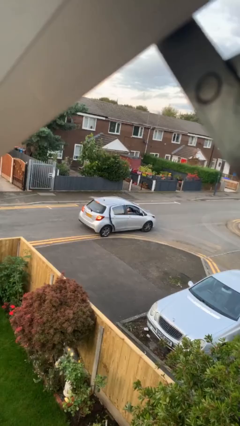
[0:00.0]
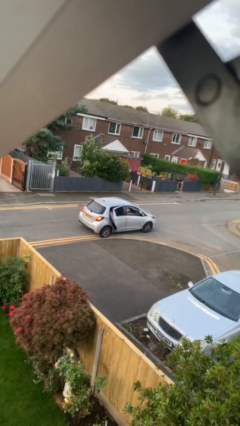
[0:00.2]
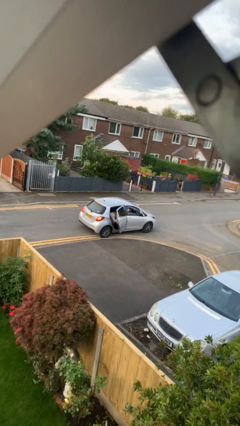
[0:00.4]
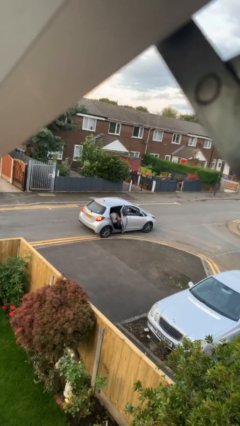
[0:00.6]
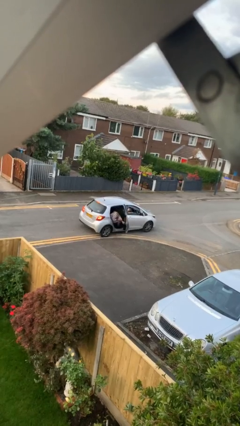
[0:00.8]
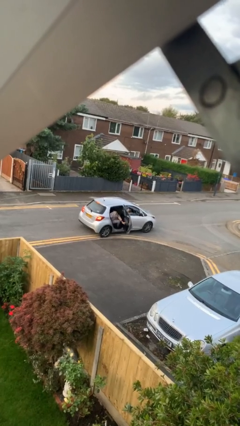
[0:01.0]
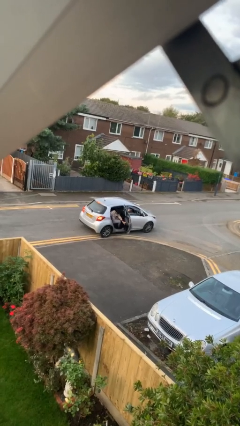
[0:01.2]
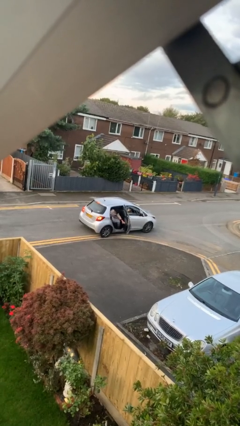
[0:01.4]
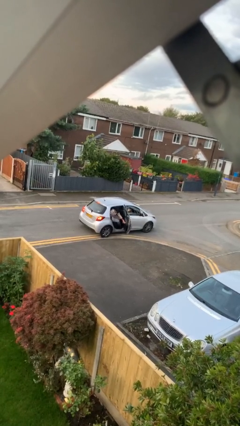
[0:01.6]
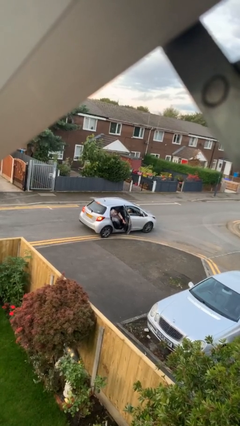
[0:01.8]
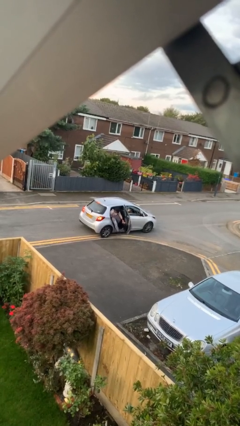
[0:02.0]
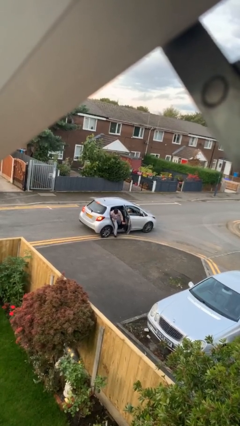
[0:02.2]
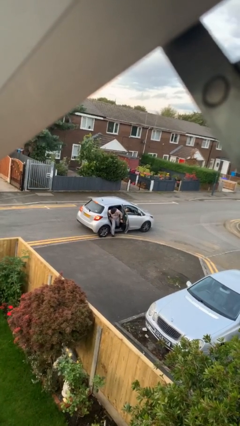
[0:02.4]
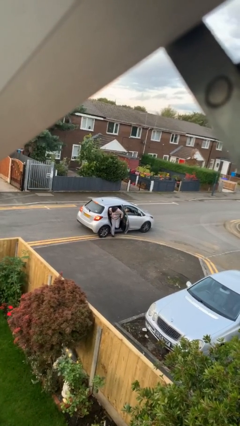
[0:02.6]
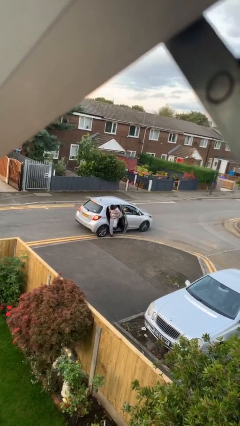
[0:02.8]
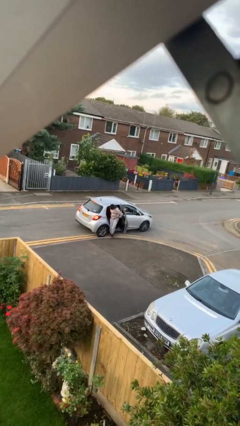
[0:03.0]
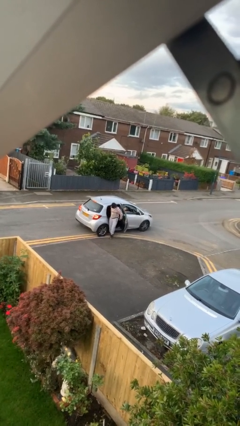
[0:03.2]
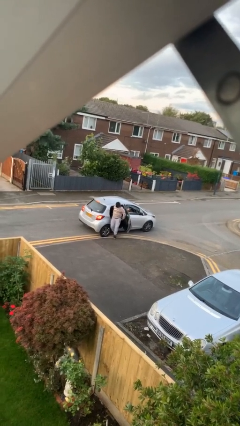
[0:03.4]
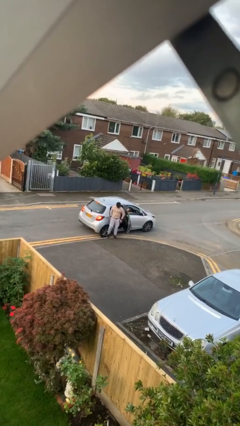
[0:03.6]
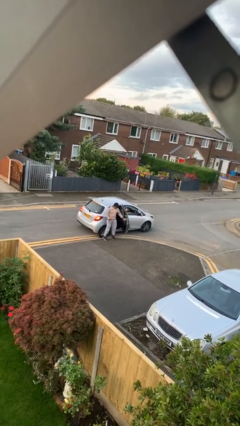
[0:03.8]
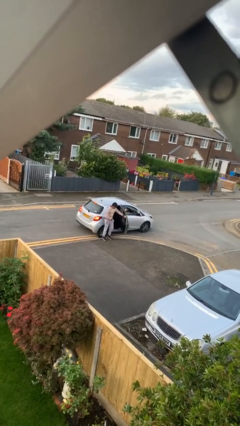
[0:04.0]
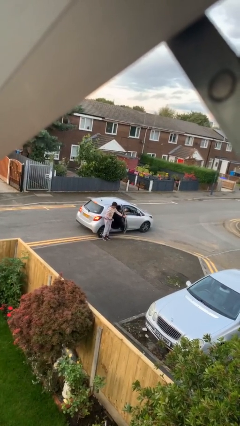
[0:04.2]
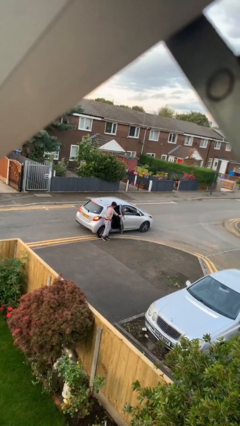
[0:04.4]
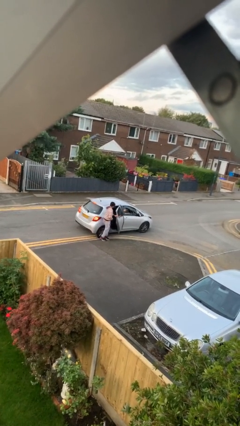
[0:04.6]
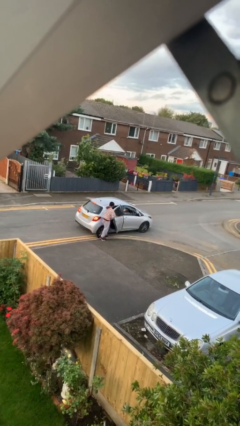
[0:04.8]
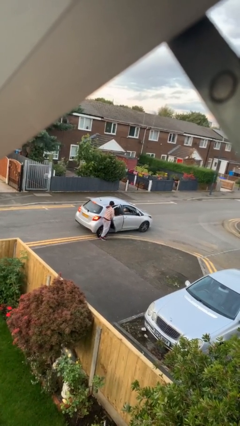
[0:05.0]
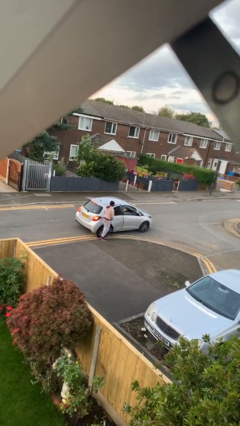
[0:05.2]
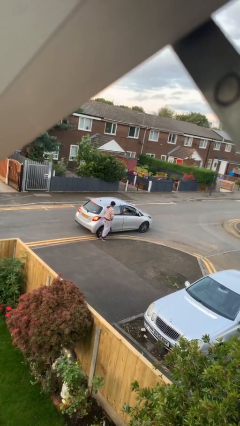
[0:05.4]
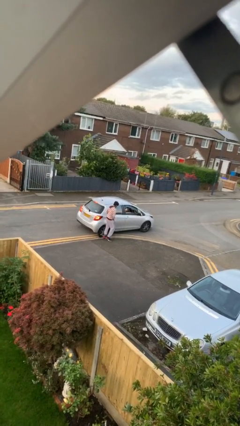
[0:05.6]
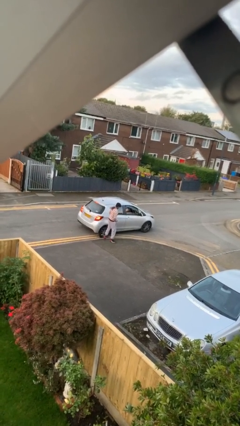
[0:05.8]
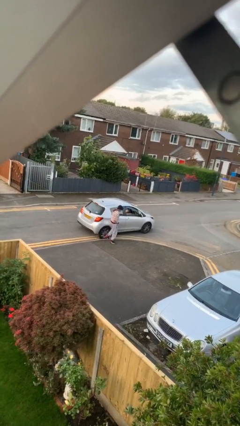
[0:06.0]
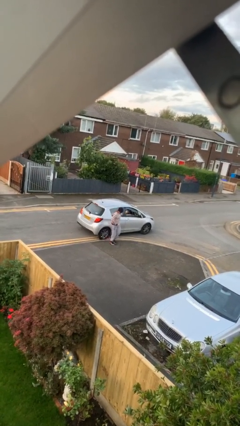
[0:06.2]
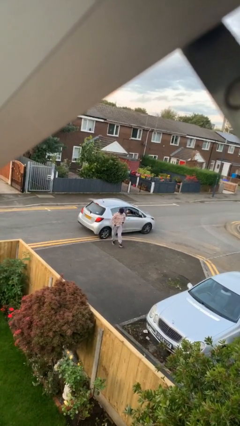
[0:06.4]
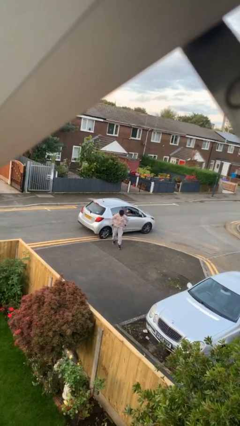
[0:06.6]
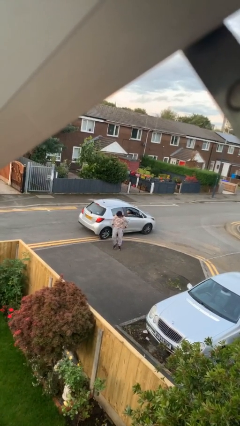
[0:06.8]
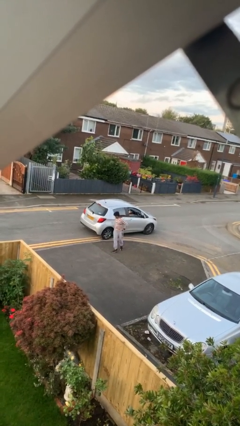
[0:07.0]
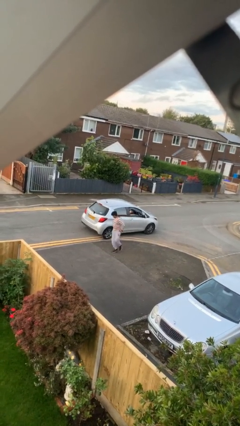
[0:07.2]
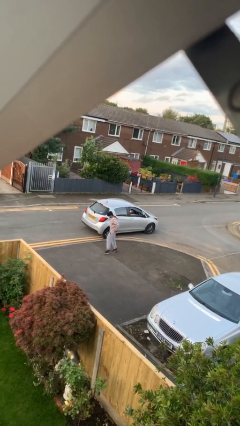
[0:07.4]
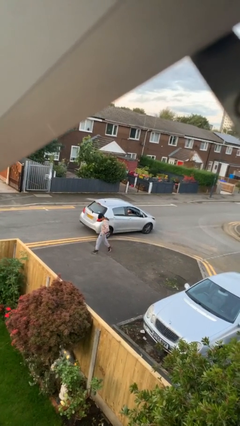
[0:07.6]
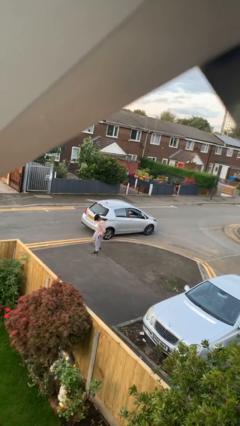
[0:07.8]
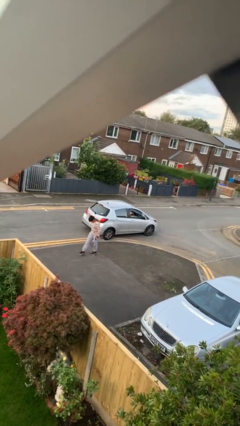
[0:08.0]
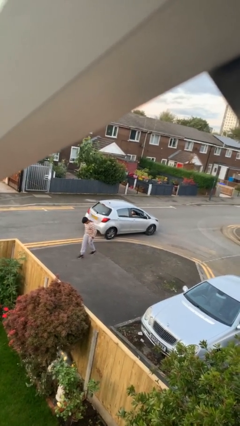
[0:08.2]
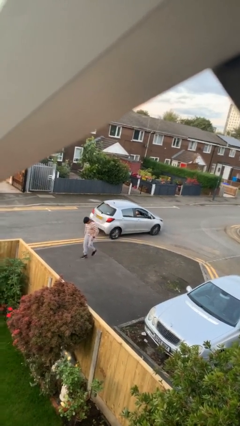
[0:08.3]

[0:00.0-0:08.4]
car drops off person

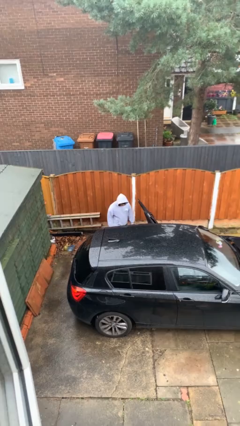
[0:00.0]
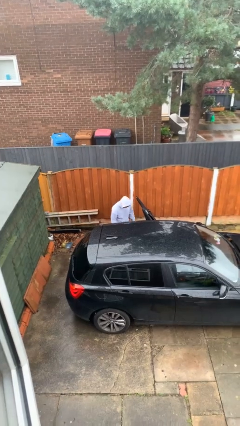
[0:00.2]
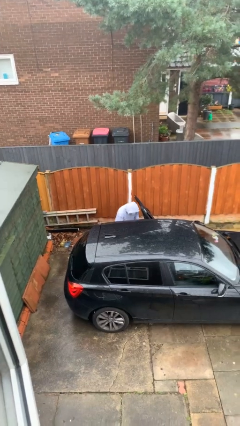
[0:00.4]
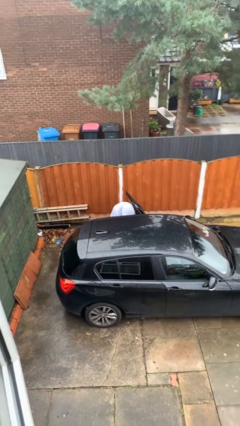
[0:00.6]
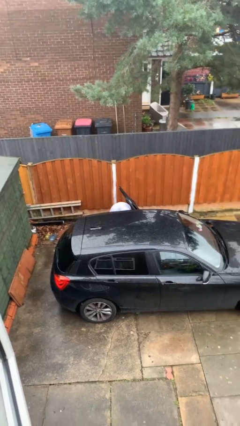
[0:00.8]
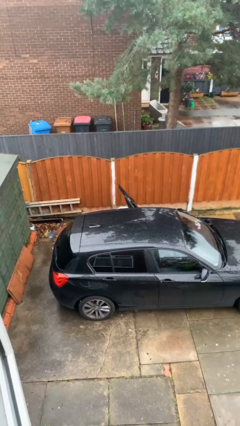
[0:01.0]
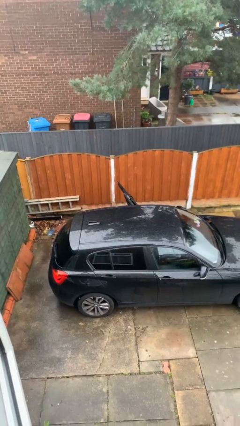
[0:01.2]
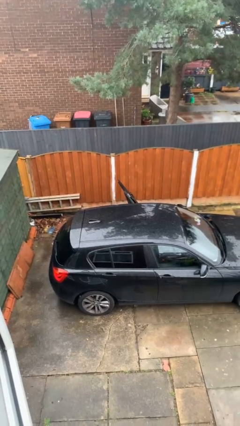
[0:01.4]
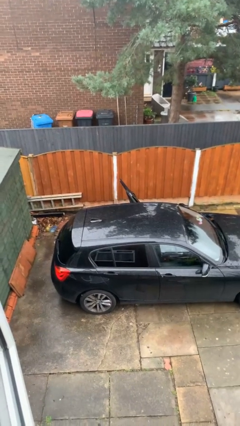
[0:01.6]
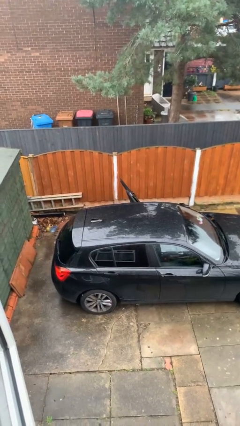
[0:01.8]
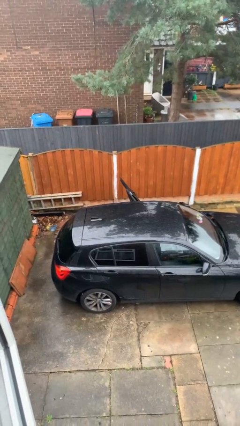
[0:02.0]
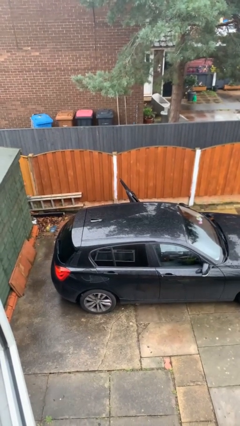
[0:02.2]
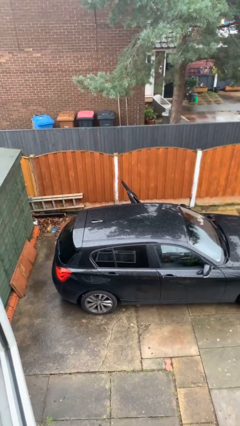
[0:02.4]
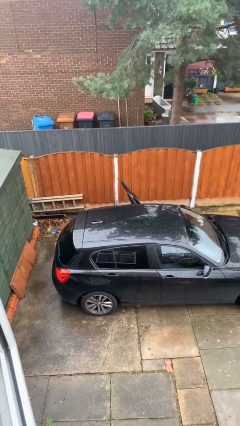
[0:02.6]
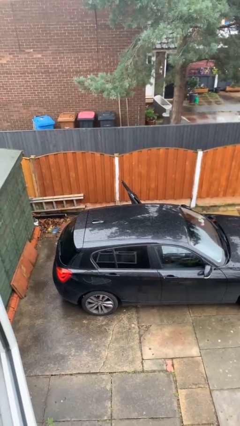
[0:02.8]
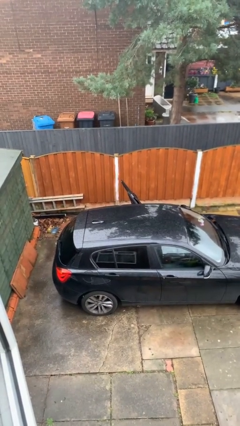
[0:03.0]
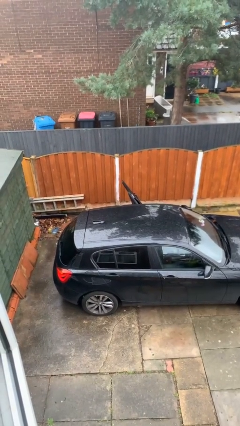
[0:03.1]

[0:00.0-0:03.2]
person enters car

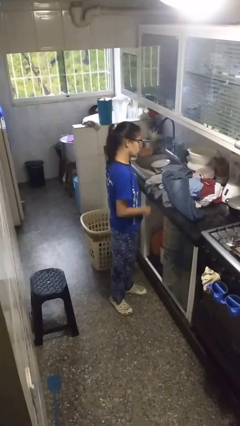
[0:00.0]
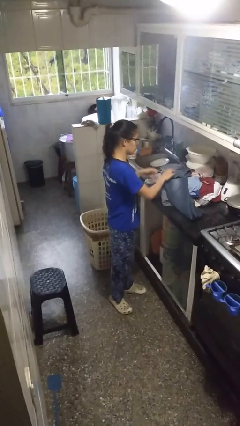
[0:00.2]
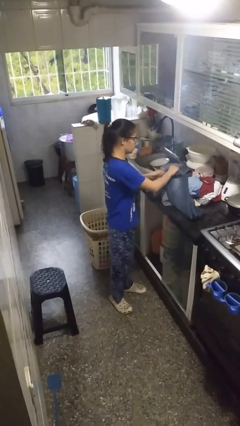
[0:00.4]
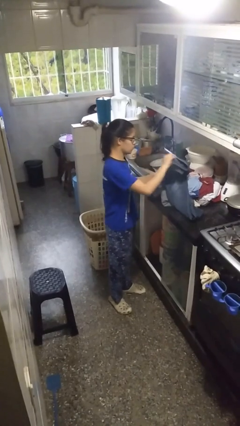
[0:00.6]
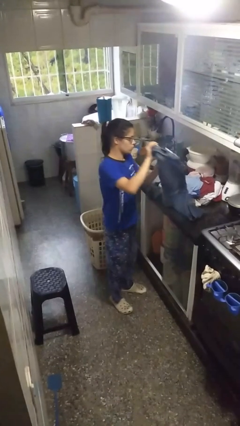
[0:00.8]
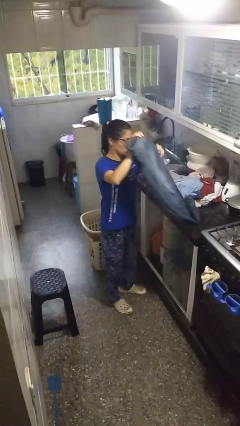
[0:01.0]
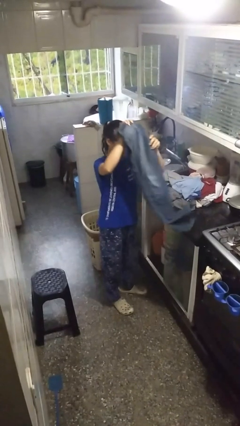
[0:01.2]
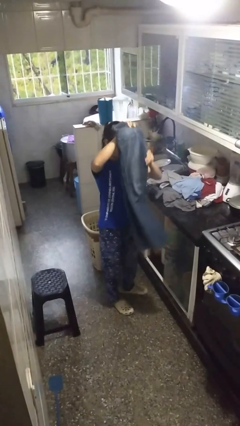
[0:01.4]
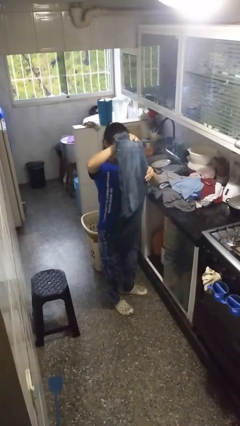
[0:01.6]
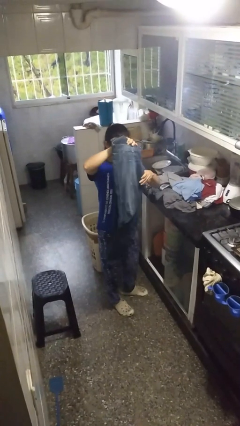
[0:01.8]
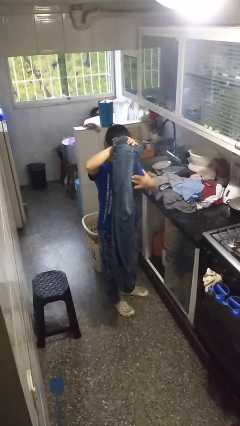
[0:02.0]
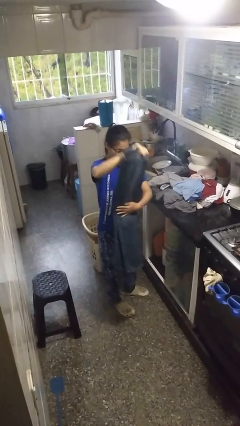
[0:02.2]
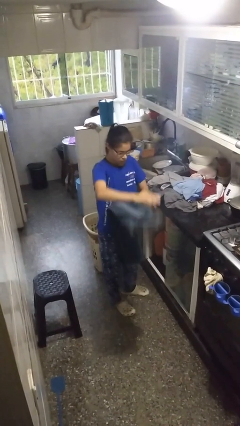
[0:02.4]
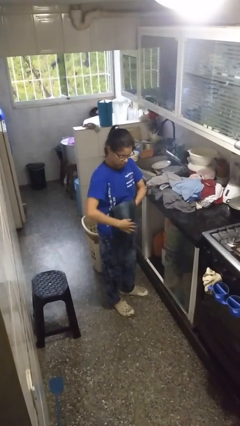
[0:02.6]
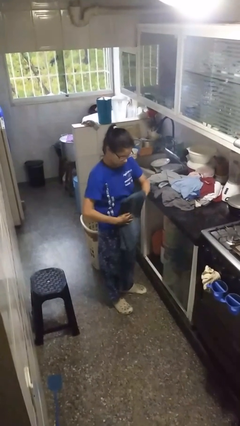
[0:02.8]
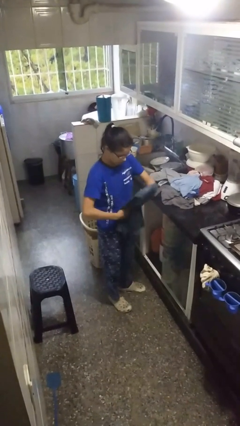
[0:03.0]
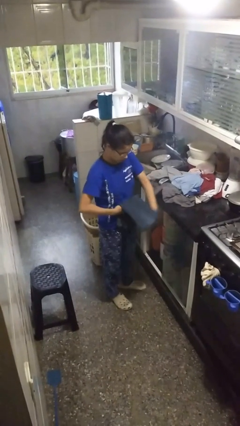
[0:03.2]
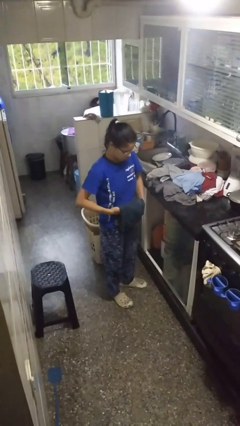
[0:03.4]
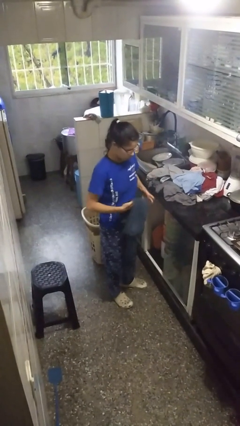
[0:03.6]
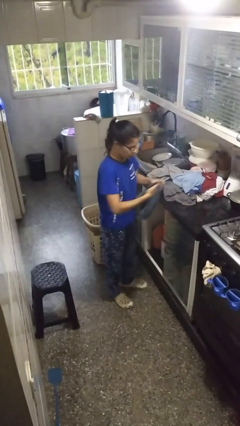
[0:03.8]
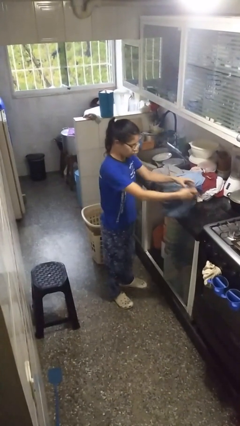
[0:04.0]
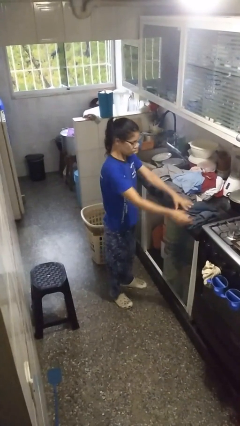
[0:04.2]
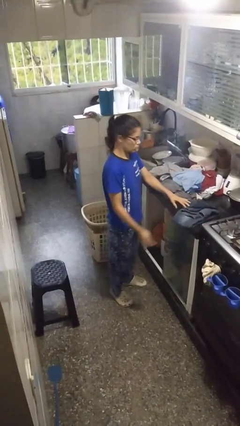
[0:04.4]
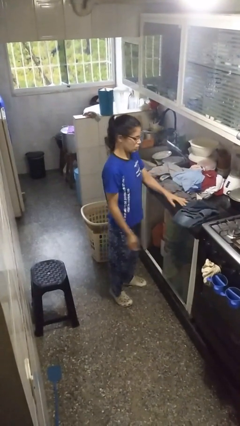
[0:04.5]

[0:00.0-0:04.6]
person folds pants

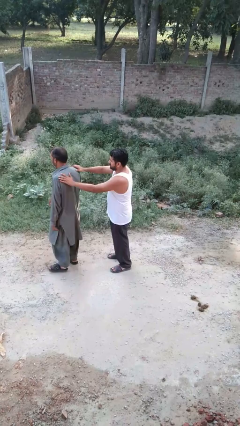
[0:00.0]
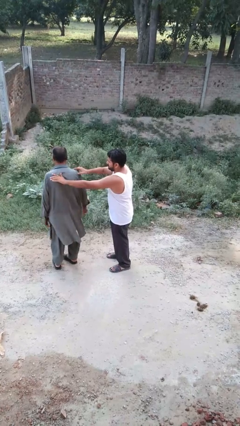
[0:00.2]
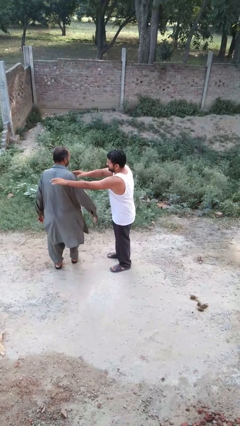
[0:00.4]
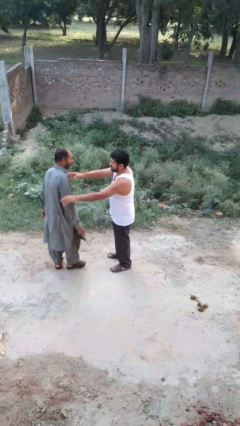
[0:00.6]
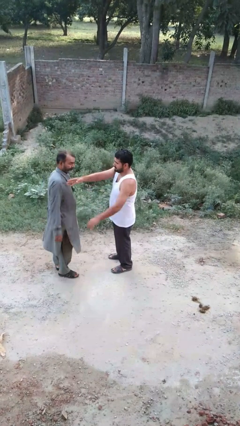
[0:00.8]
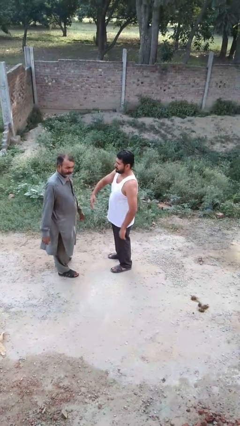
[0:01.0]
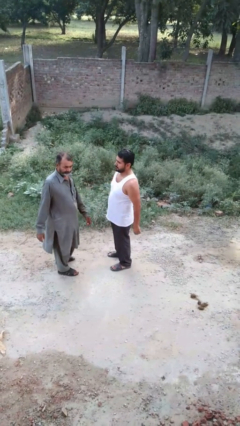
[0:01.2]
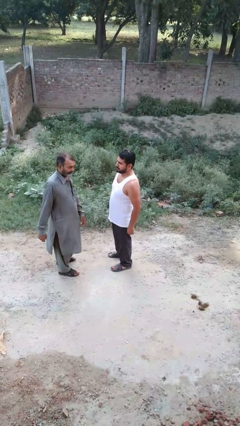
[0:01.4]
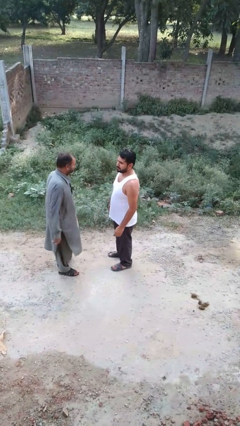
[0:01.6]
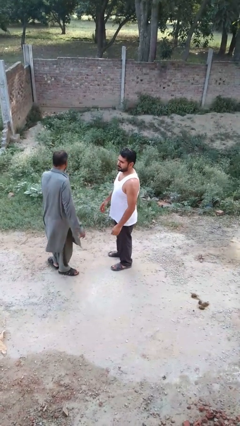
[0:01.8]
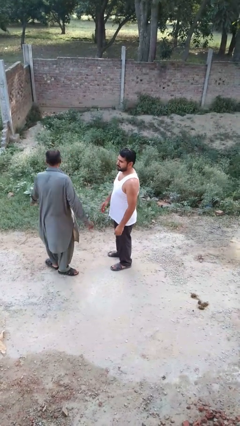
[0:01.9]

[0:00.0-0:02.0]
person spins person around
